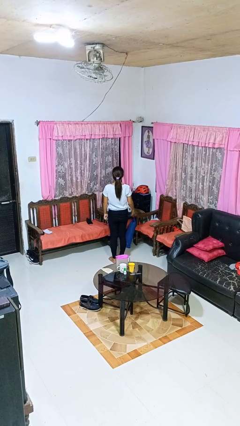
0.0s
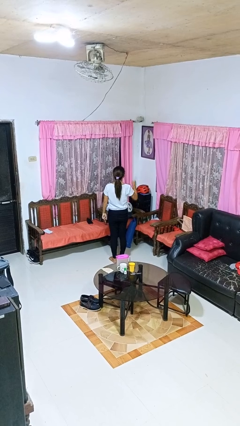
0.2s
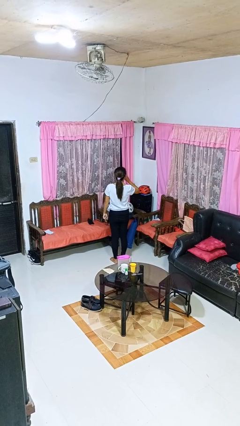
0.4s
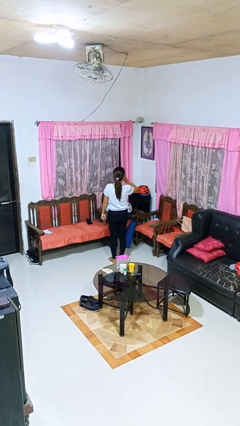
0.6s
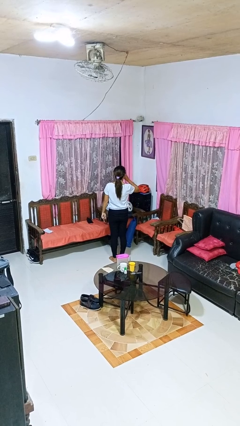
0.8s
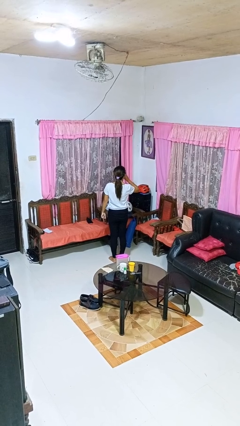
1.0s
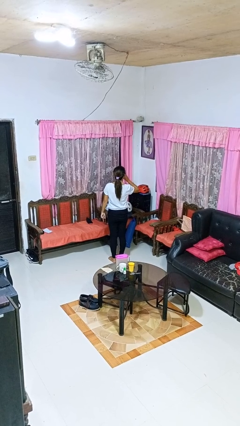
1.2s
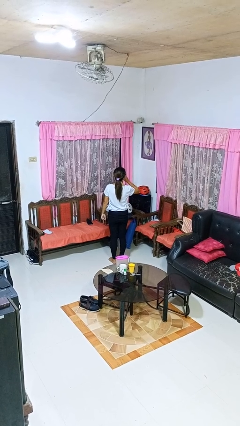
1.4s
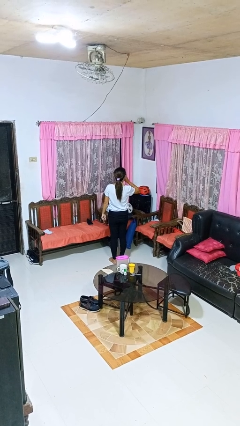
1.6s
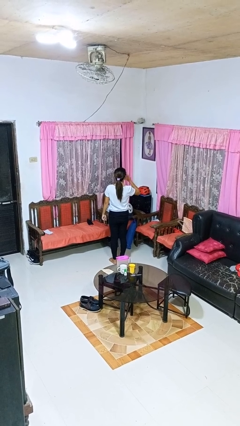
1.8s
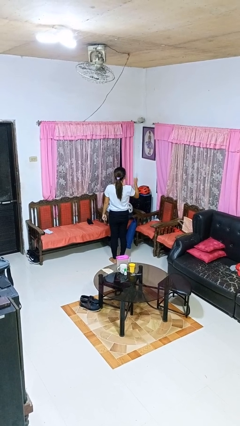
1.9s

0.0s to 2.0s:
person gestures be quiet

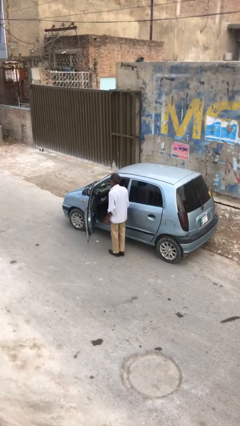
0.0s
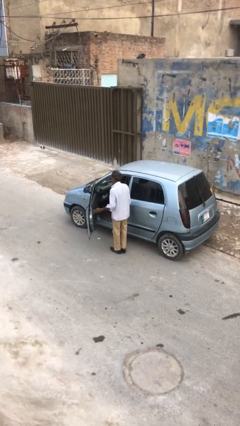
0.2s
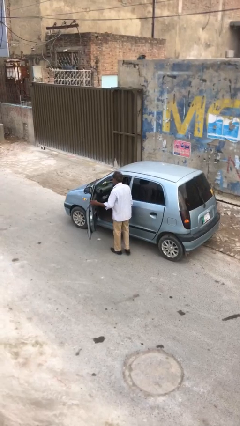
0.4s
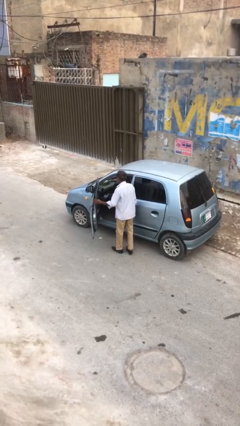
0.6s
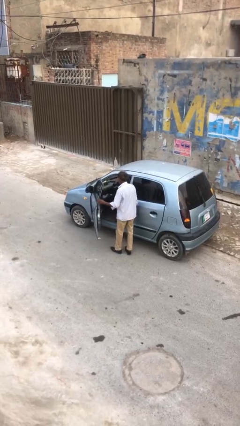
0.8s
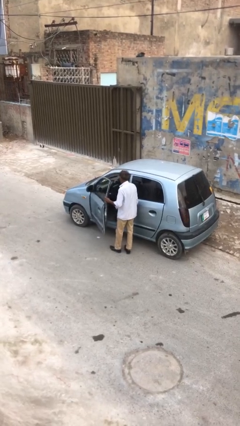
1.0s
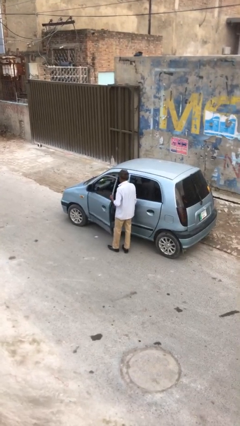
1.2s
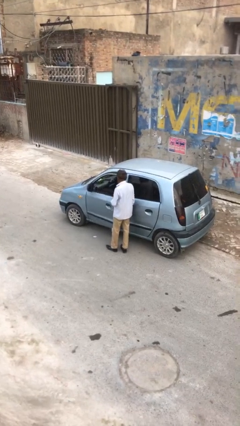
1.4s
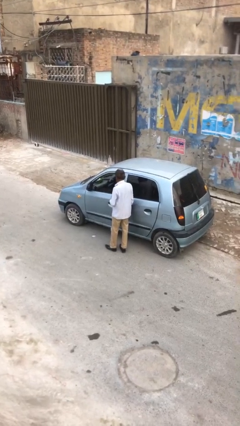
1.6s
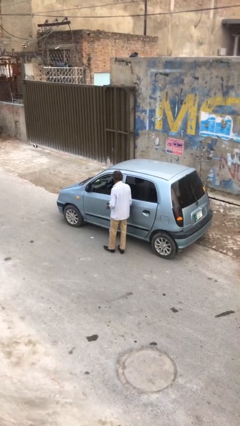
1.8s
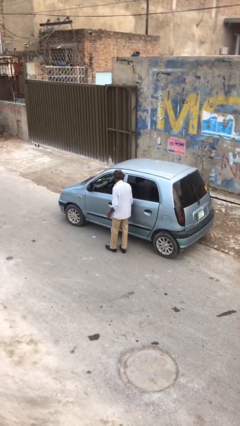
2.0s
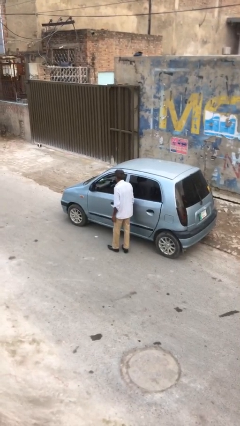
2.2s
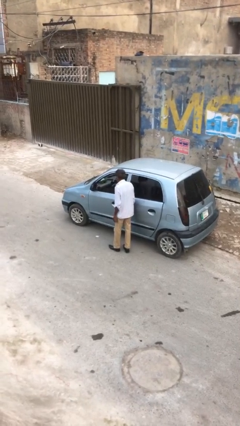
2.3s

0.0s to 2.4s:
person closes car door

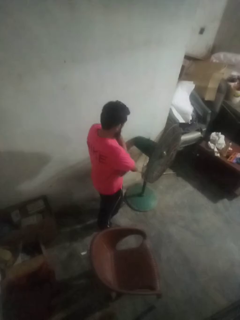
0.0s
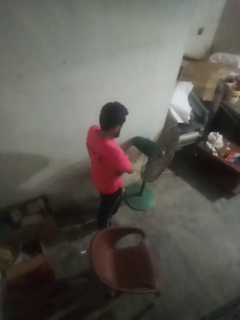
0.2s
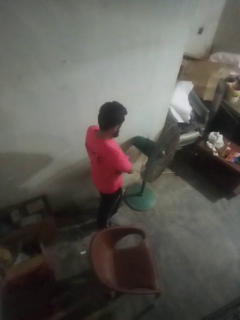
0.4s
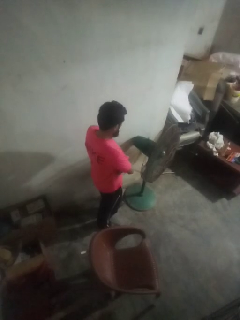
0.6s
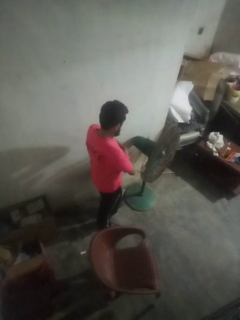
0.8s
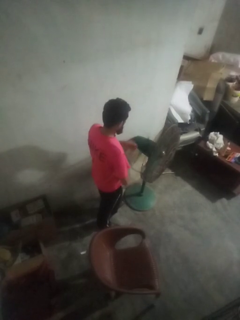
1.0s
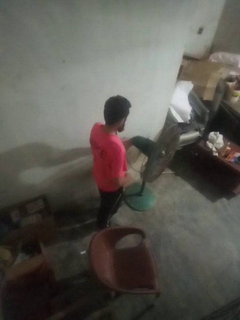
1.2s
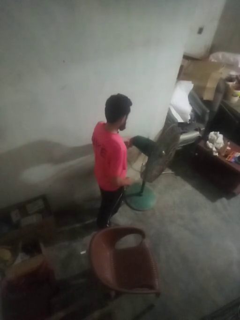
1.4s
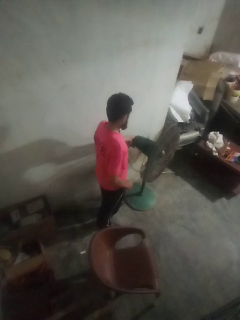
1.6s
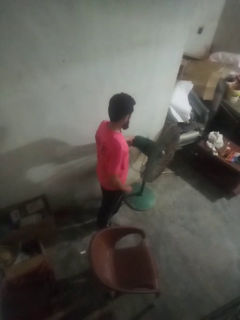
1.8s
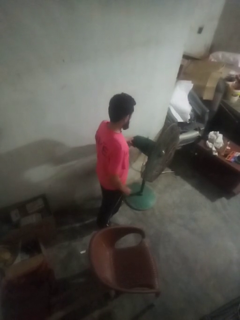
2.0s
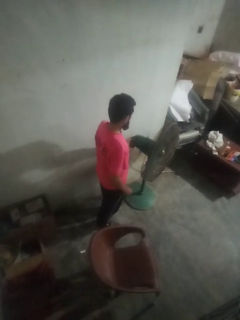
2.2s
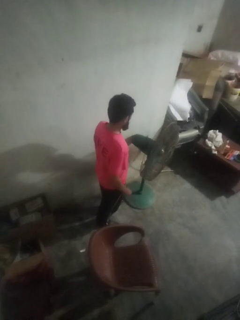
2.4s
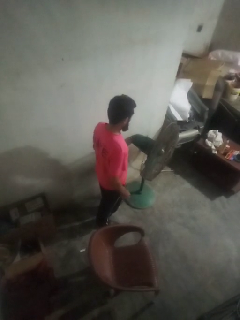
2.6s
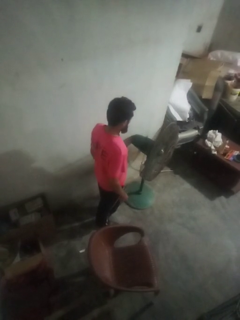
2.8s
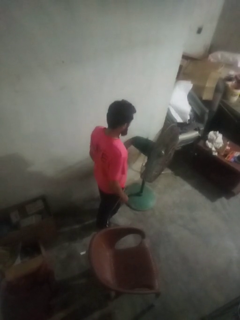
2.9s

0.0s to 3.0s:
person turns on fan

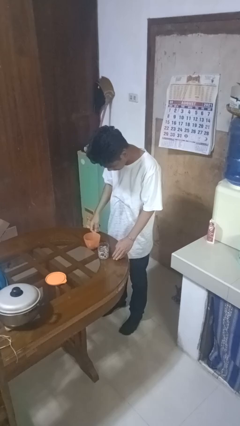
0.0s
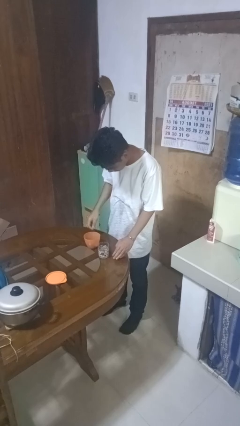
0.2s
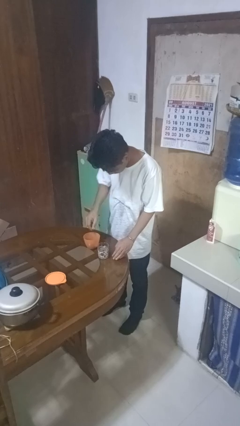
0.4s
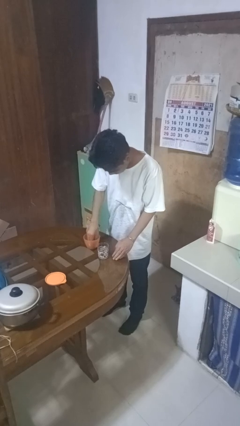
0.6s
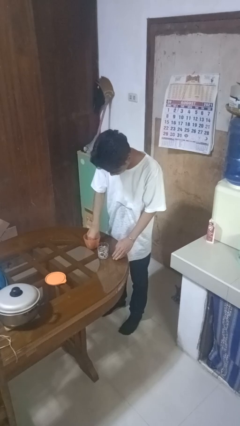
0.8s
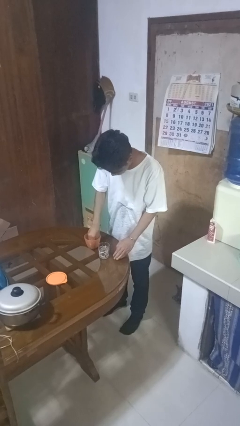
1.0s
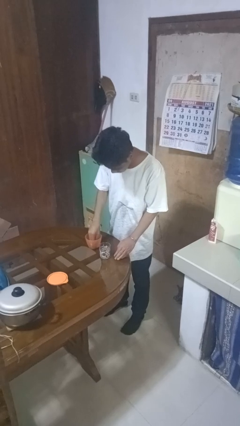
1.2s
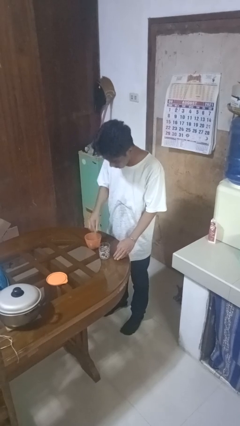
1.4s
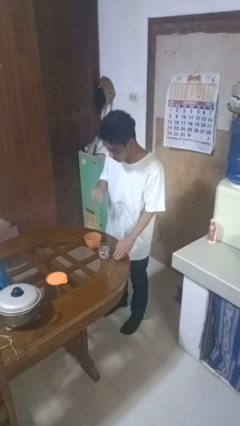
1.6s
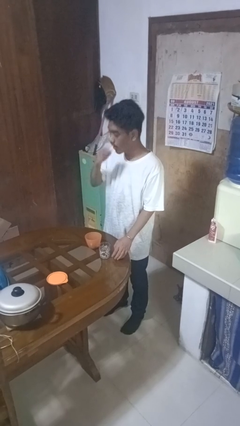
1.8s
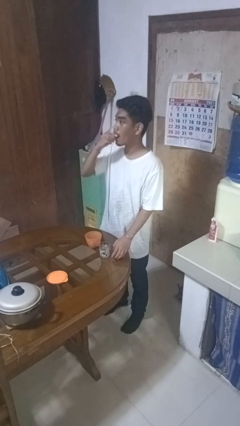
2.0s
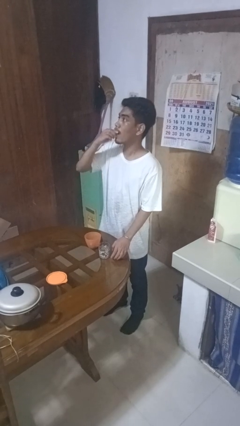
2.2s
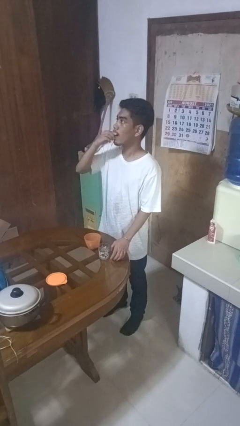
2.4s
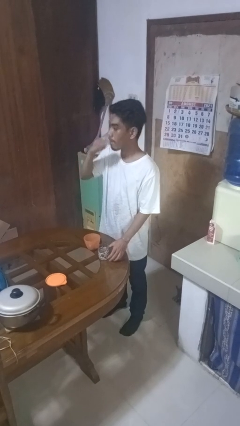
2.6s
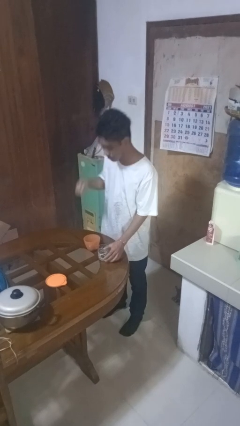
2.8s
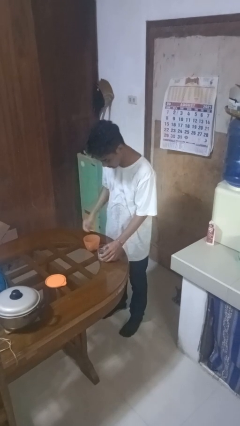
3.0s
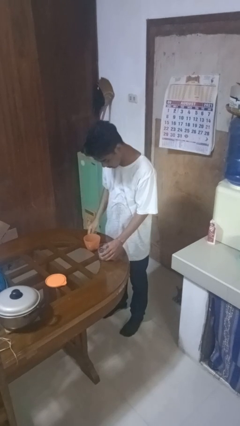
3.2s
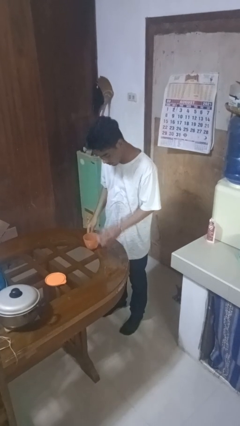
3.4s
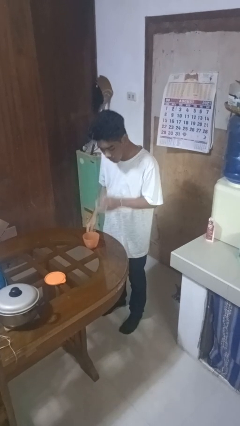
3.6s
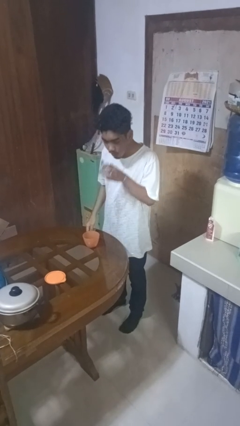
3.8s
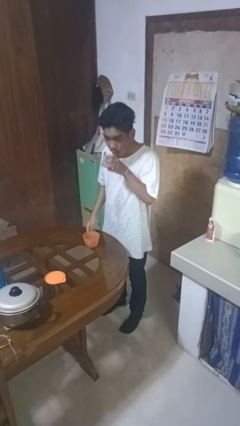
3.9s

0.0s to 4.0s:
person takes medicine pills

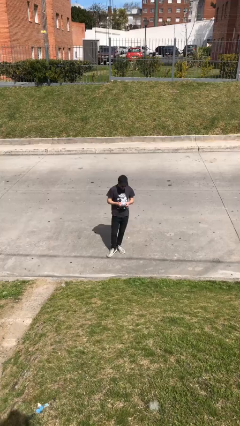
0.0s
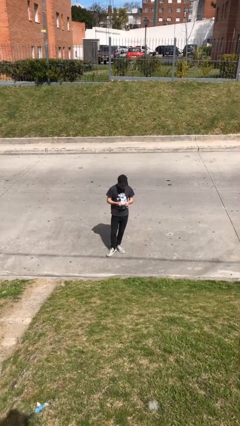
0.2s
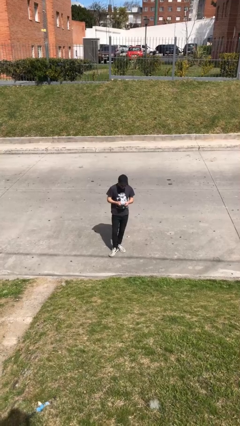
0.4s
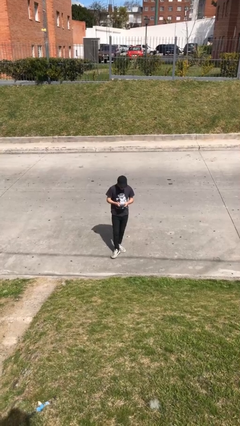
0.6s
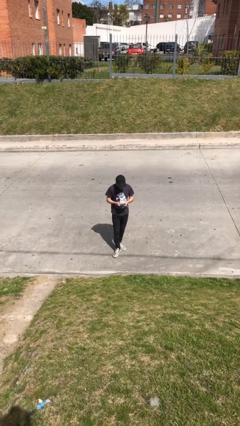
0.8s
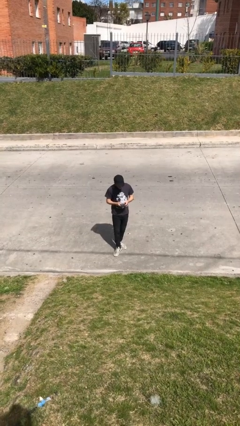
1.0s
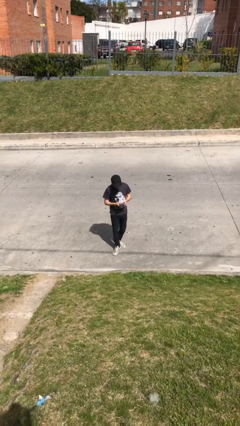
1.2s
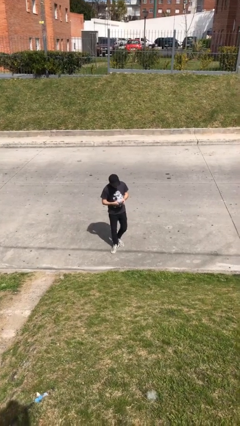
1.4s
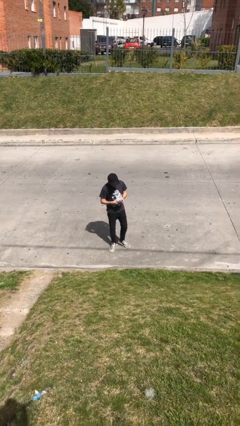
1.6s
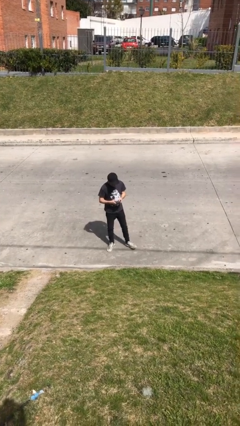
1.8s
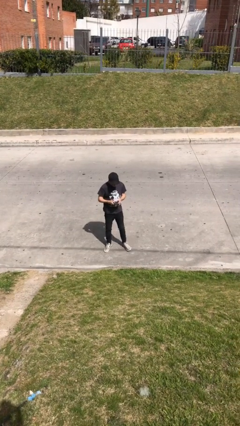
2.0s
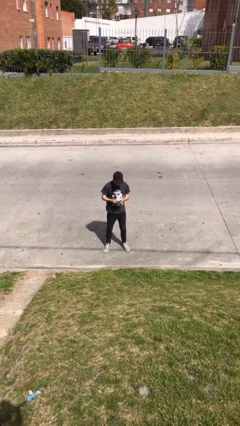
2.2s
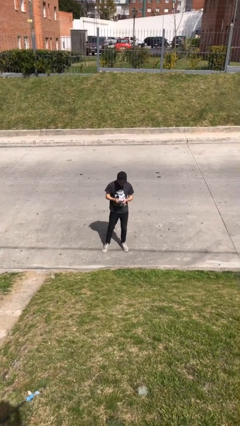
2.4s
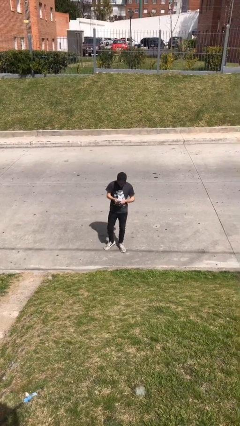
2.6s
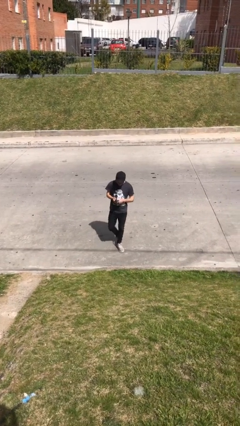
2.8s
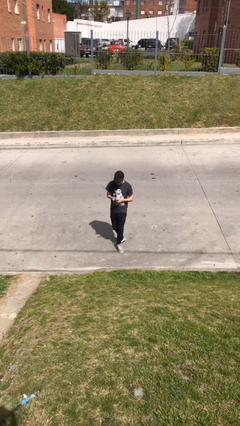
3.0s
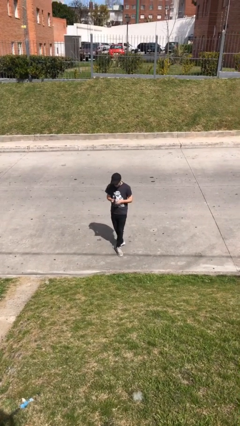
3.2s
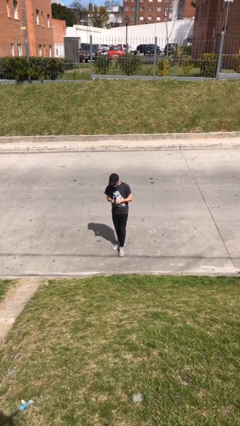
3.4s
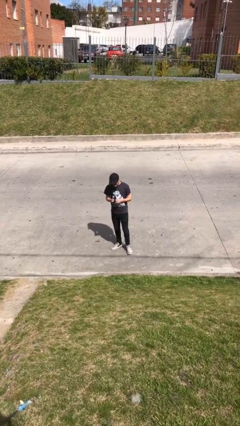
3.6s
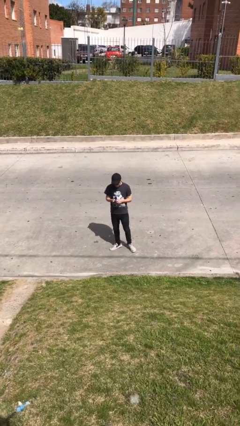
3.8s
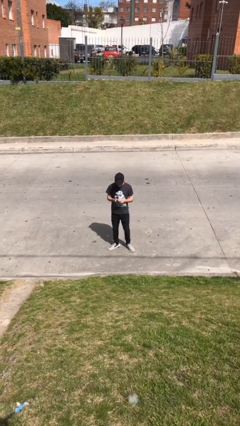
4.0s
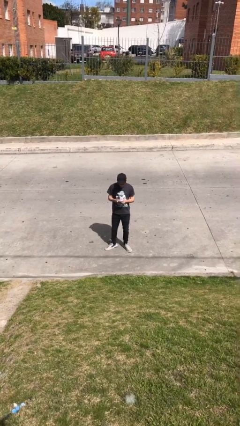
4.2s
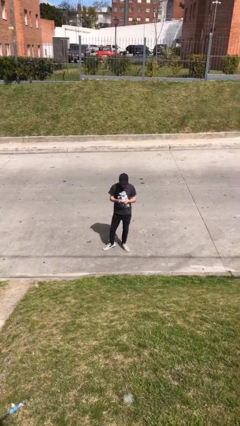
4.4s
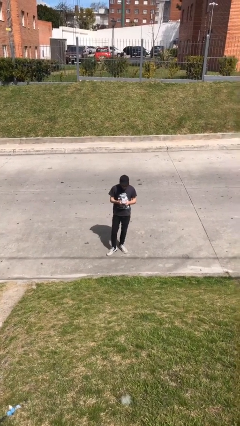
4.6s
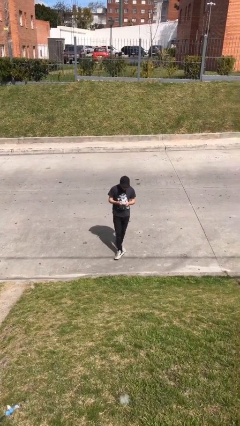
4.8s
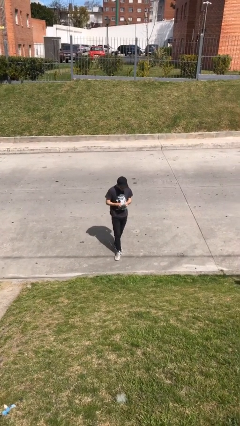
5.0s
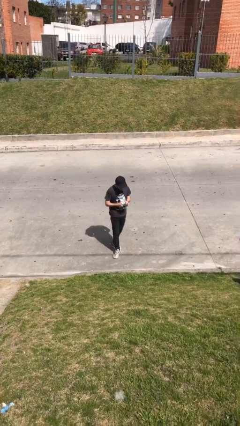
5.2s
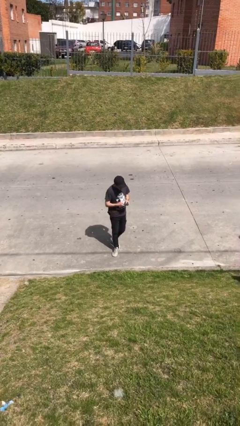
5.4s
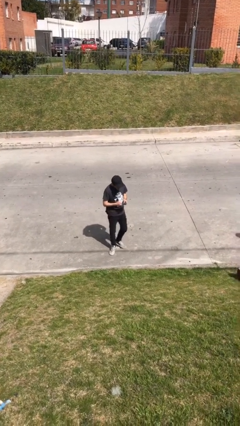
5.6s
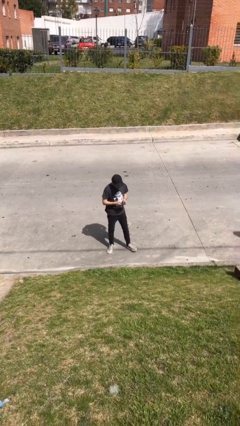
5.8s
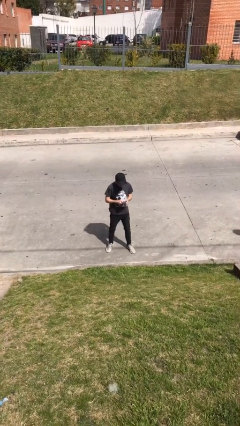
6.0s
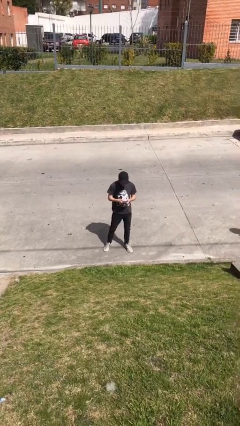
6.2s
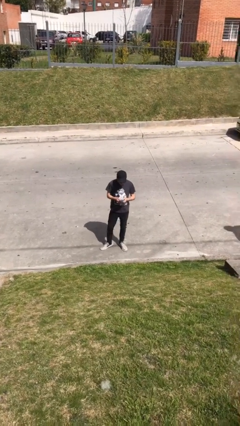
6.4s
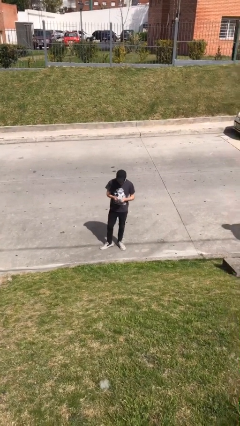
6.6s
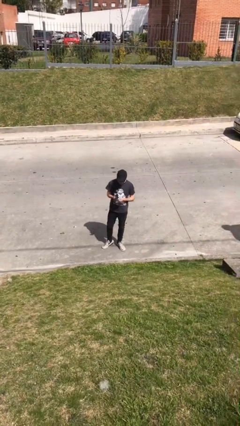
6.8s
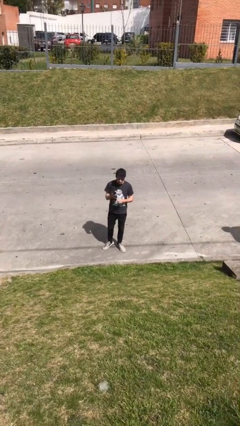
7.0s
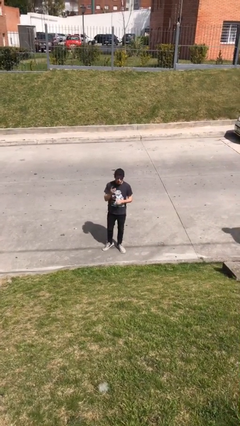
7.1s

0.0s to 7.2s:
person texts on phone
